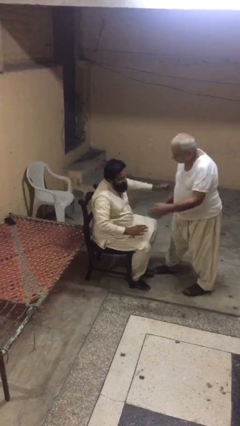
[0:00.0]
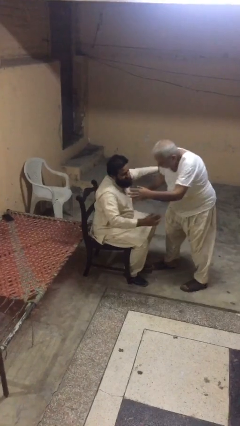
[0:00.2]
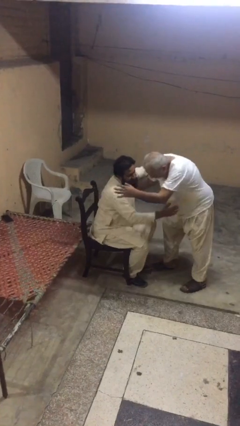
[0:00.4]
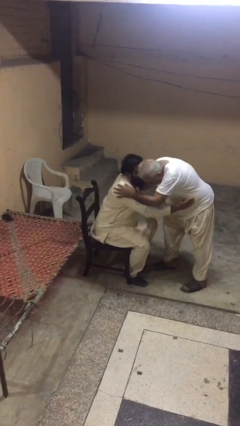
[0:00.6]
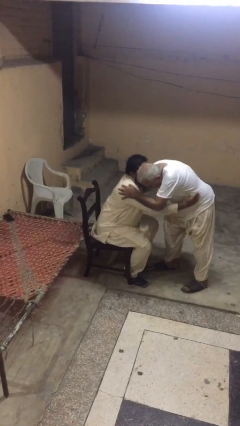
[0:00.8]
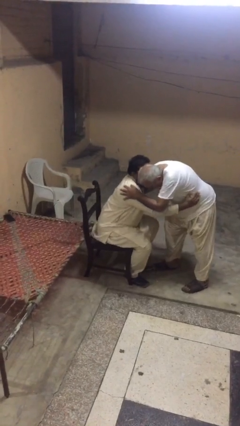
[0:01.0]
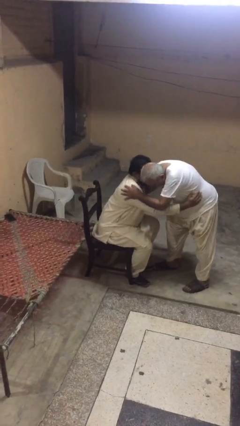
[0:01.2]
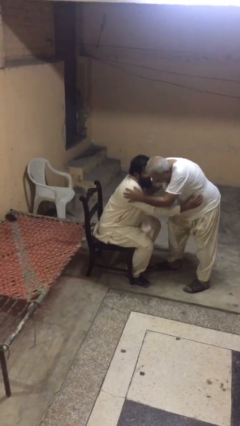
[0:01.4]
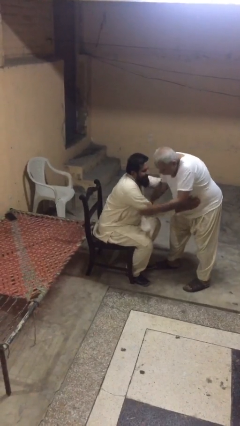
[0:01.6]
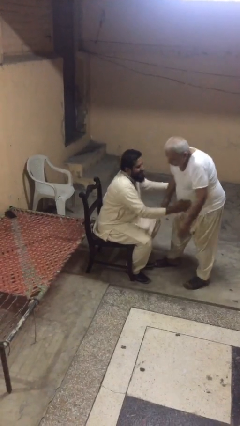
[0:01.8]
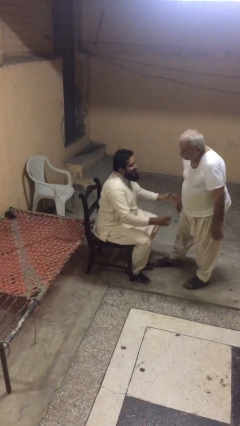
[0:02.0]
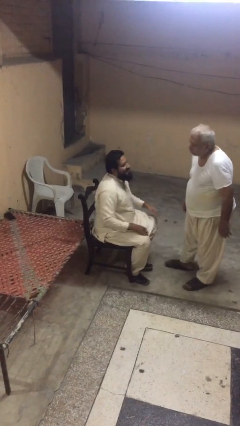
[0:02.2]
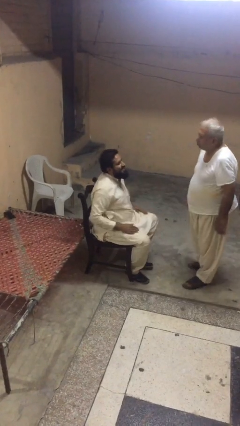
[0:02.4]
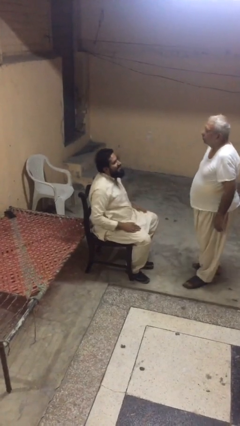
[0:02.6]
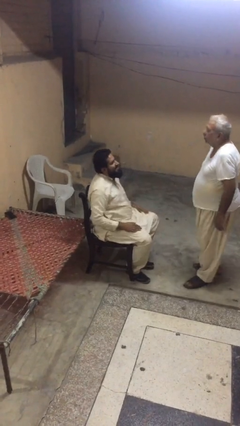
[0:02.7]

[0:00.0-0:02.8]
person embraces person

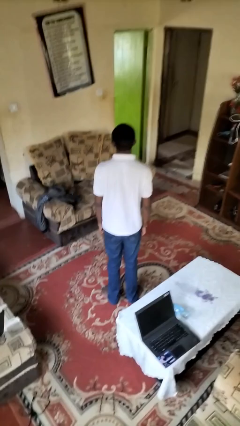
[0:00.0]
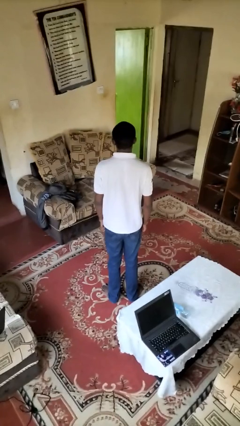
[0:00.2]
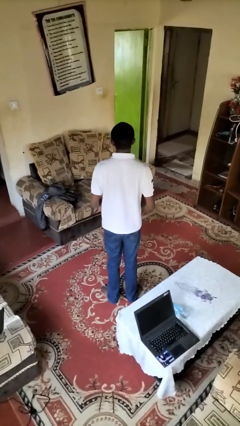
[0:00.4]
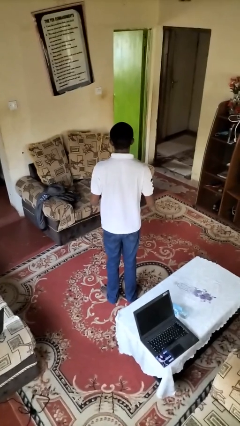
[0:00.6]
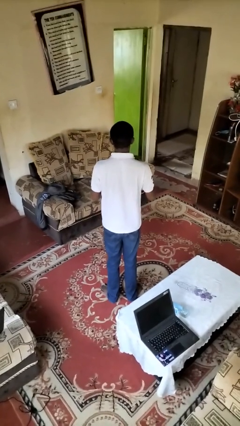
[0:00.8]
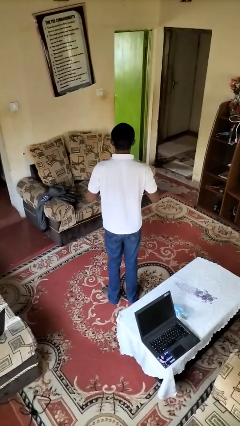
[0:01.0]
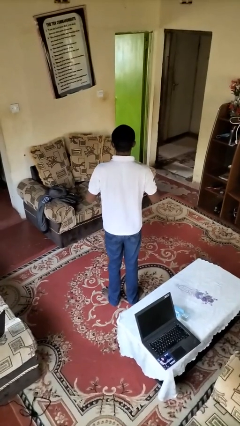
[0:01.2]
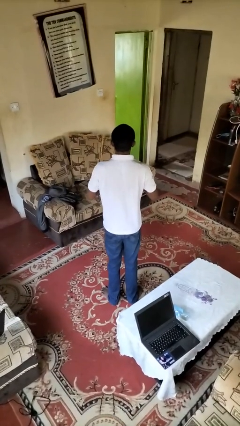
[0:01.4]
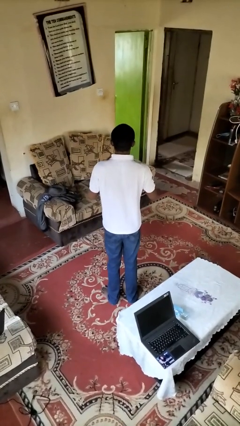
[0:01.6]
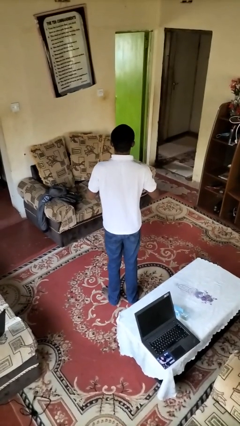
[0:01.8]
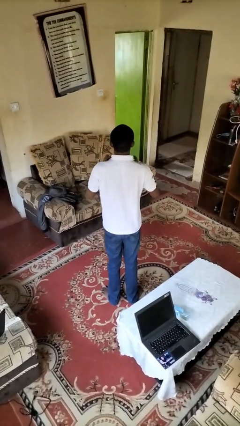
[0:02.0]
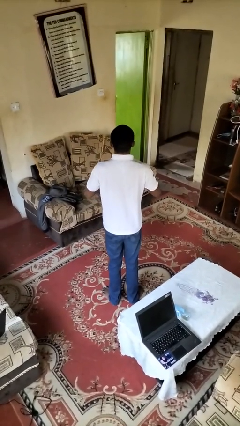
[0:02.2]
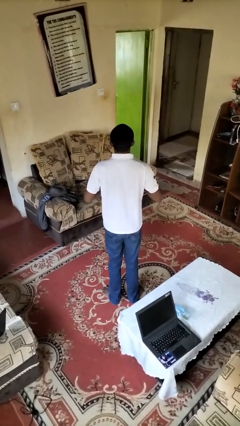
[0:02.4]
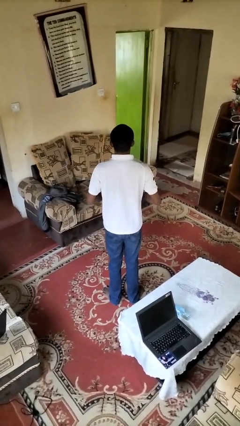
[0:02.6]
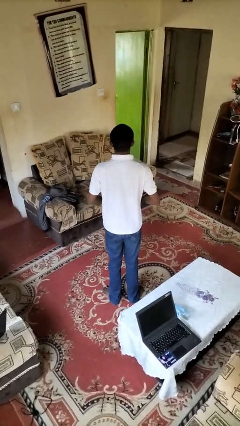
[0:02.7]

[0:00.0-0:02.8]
person drums on chest

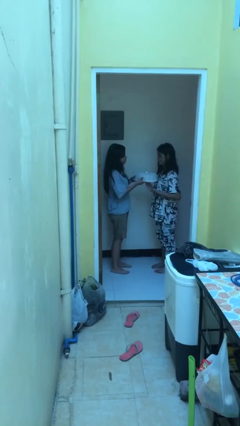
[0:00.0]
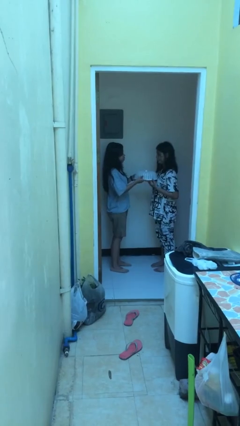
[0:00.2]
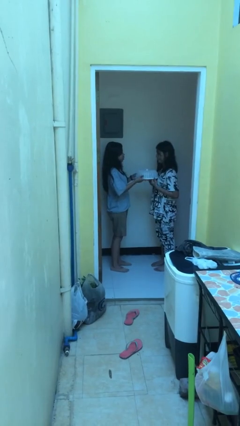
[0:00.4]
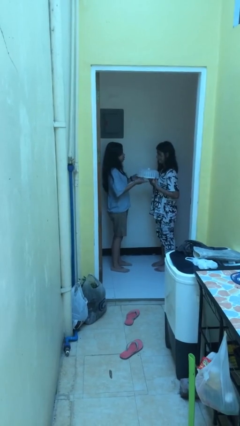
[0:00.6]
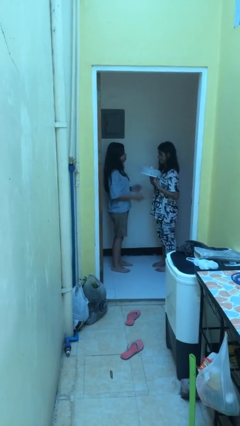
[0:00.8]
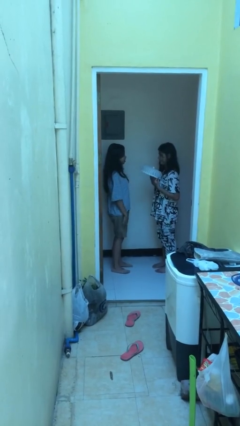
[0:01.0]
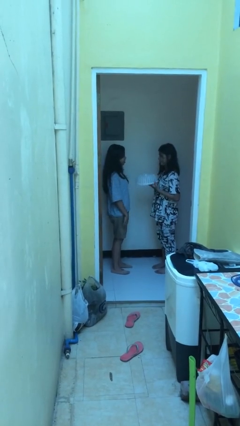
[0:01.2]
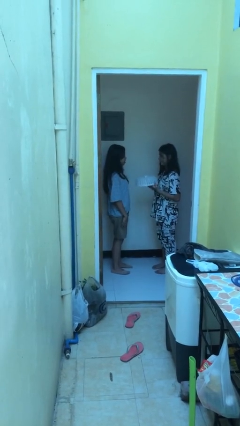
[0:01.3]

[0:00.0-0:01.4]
person transfers object to person

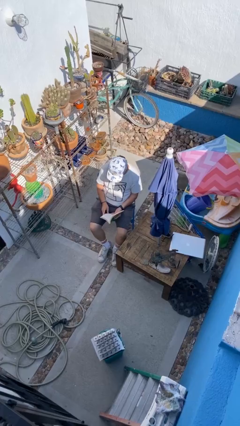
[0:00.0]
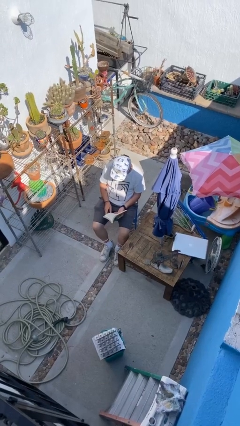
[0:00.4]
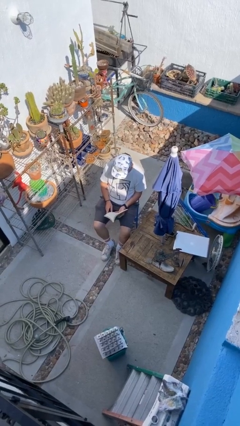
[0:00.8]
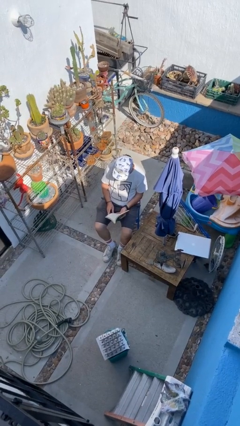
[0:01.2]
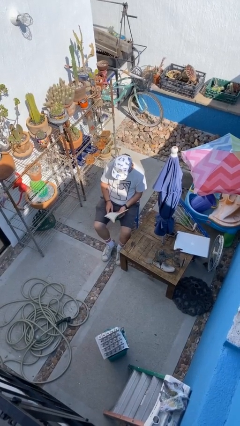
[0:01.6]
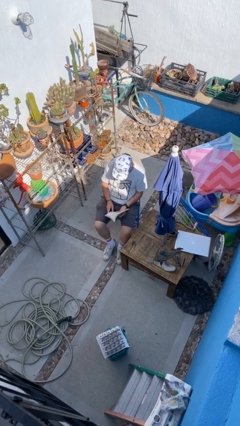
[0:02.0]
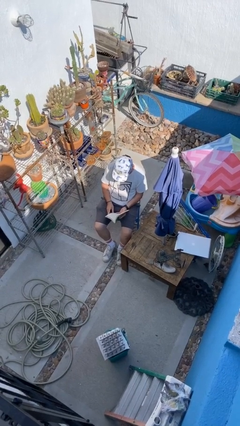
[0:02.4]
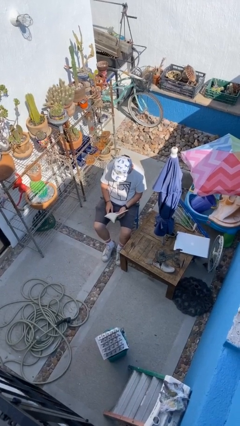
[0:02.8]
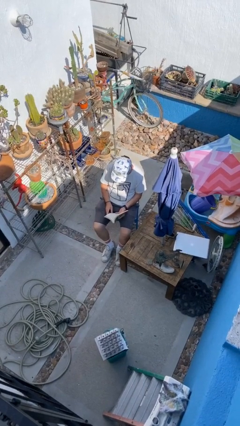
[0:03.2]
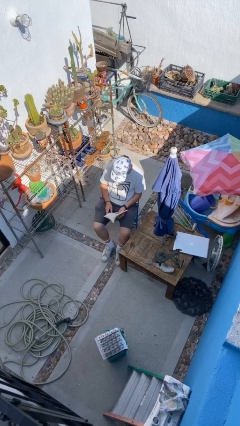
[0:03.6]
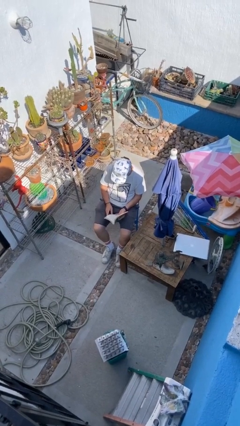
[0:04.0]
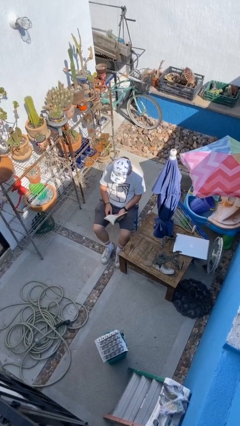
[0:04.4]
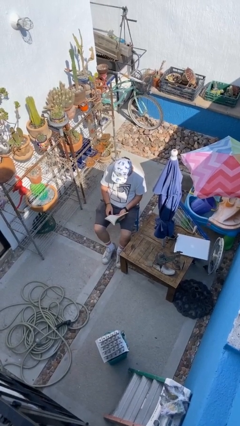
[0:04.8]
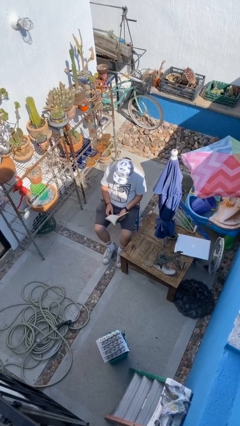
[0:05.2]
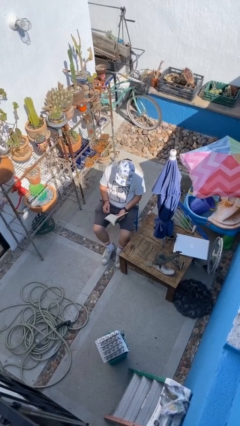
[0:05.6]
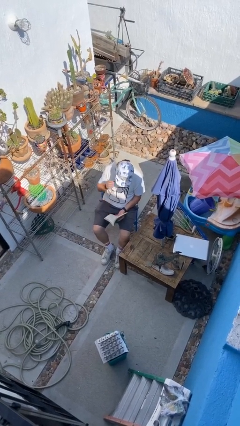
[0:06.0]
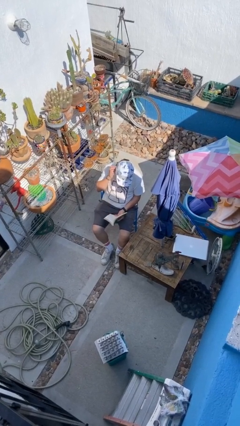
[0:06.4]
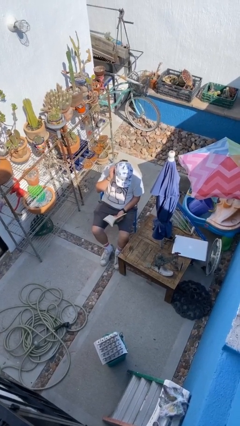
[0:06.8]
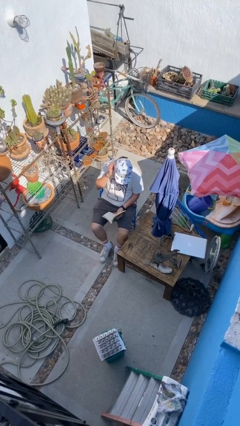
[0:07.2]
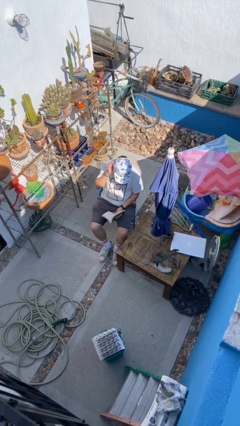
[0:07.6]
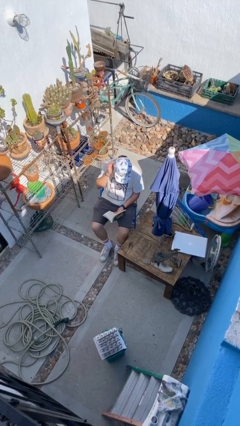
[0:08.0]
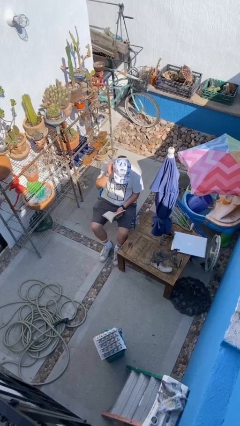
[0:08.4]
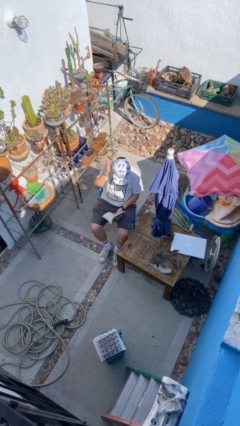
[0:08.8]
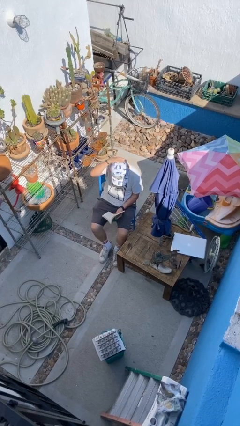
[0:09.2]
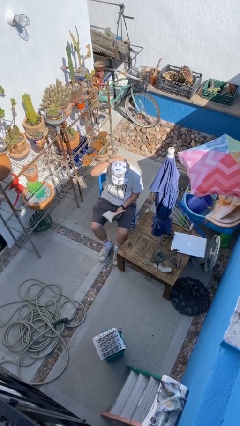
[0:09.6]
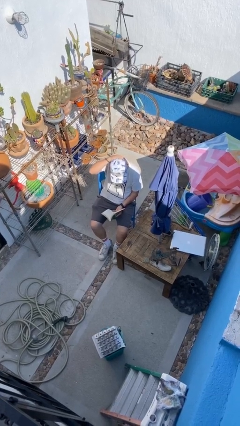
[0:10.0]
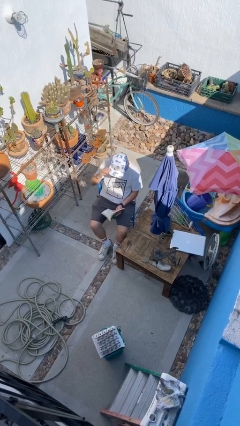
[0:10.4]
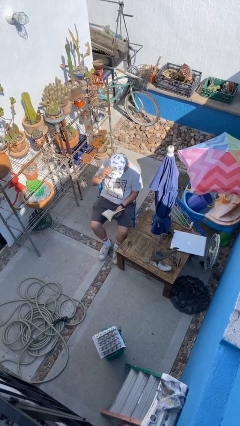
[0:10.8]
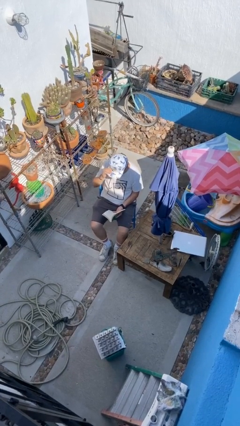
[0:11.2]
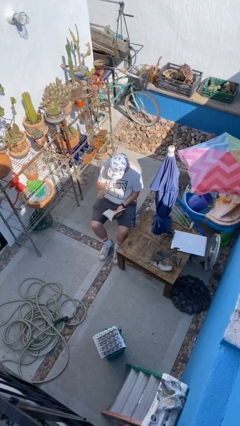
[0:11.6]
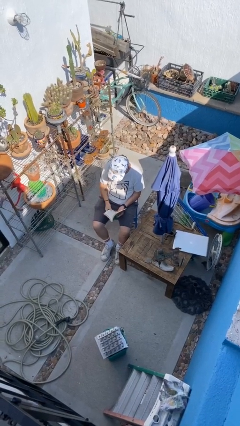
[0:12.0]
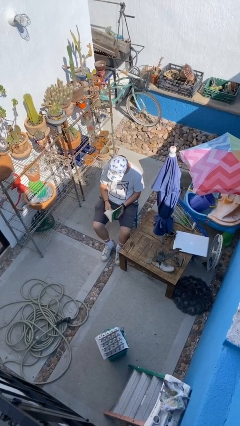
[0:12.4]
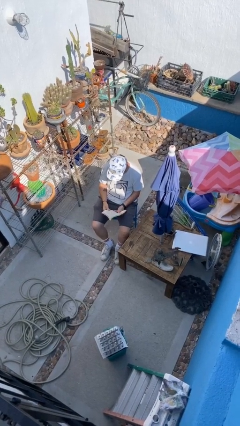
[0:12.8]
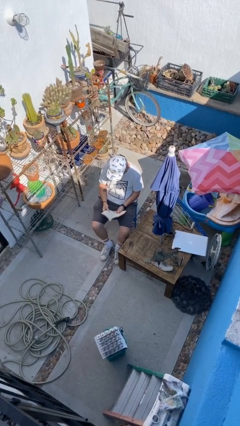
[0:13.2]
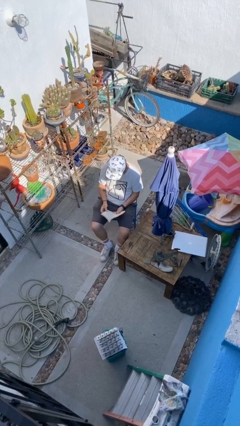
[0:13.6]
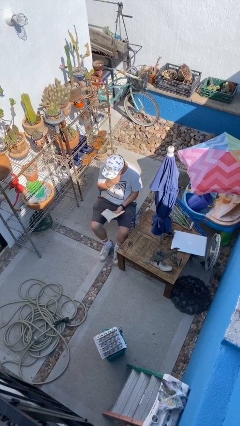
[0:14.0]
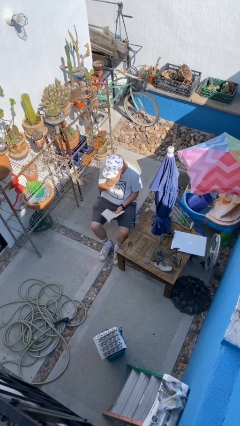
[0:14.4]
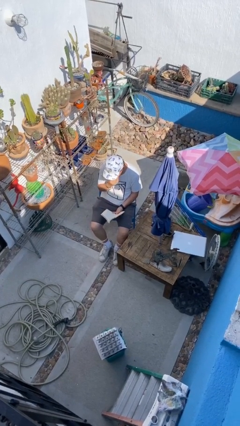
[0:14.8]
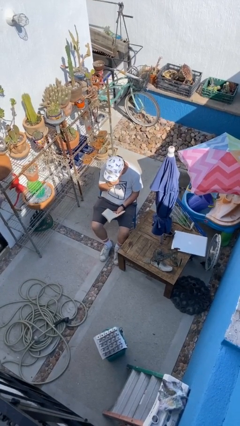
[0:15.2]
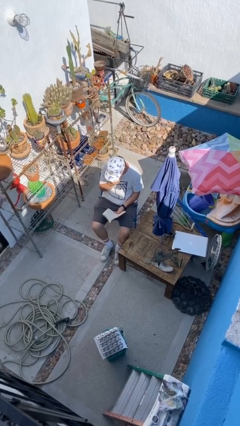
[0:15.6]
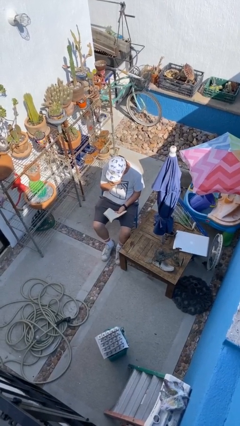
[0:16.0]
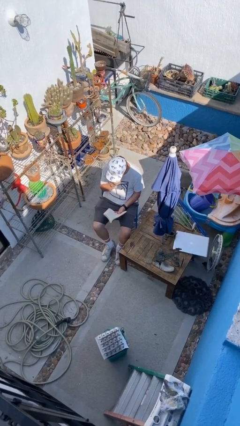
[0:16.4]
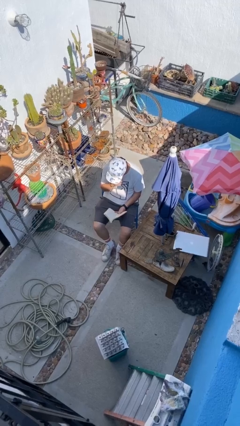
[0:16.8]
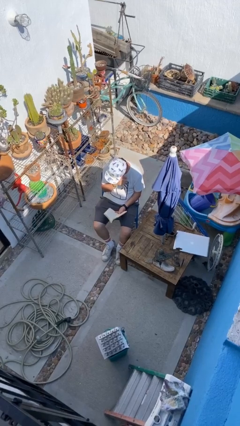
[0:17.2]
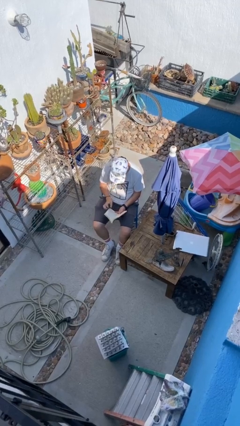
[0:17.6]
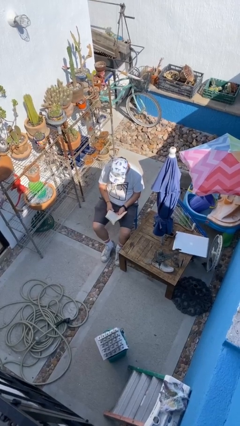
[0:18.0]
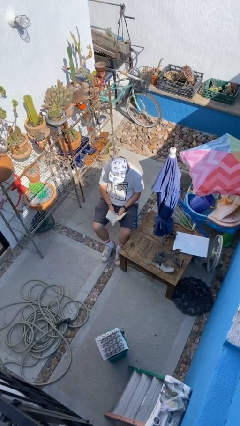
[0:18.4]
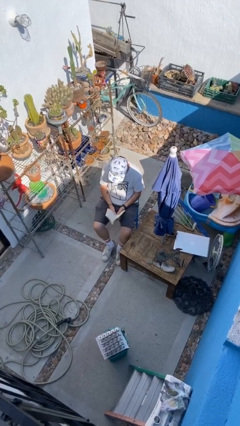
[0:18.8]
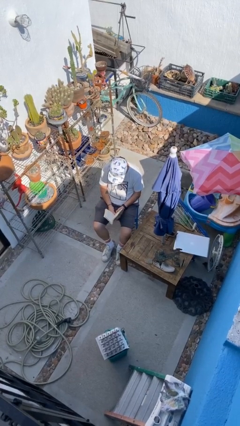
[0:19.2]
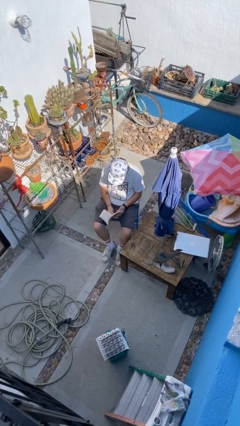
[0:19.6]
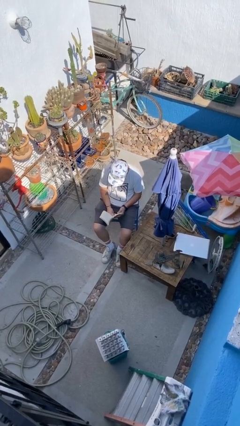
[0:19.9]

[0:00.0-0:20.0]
person reads document
